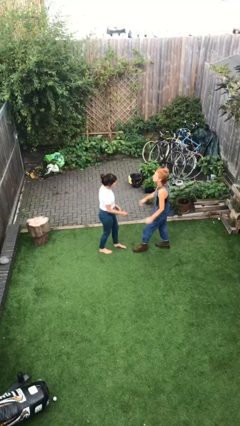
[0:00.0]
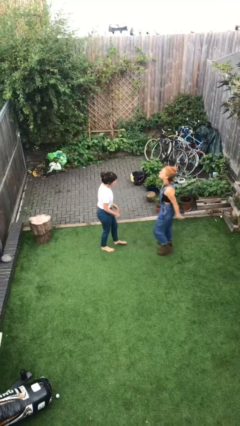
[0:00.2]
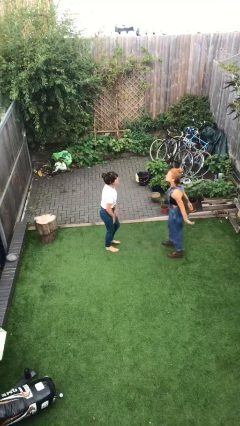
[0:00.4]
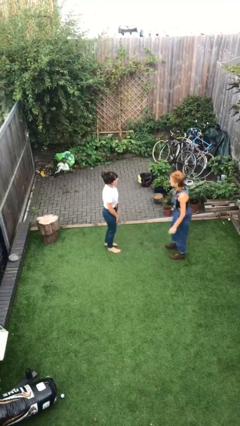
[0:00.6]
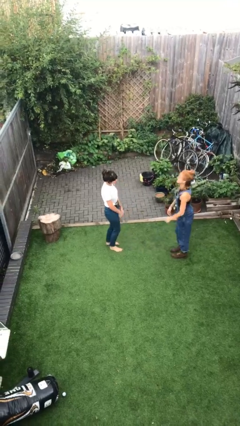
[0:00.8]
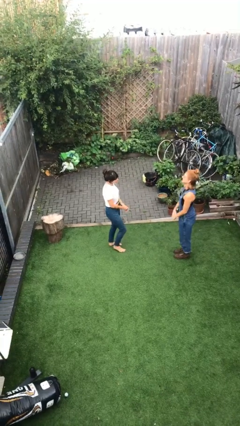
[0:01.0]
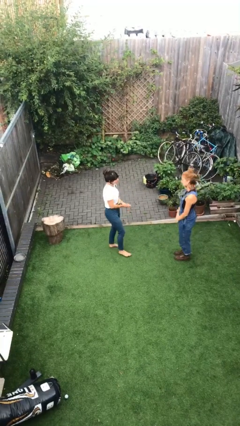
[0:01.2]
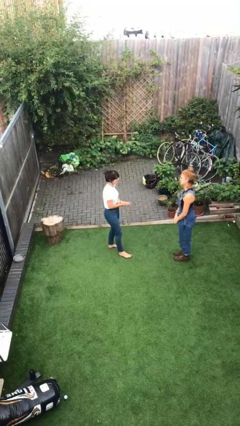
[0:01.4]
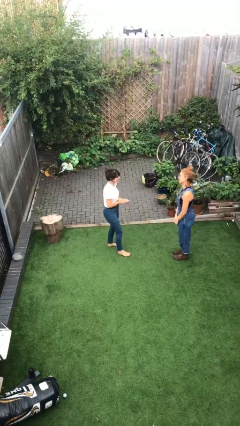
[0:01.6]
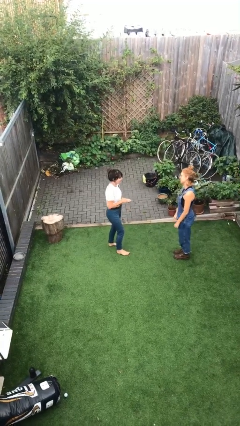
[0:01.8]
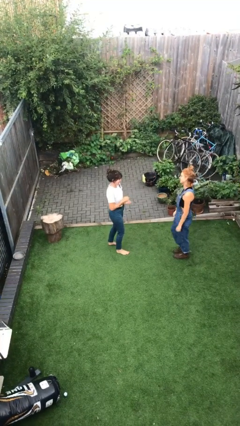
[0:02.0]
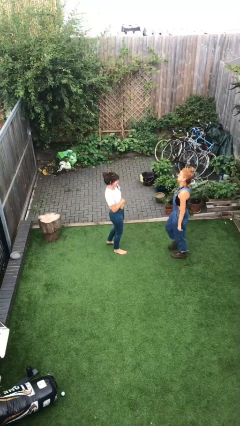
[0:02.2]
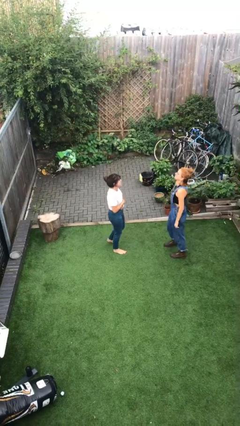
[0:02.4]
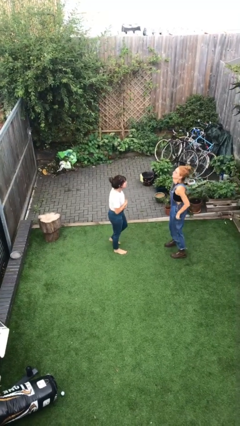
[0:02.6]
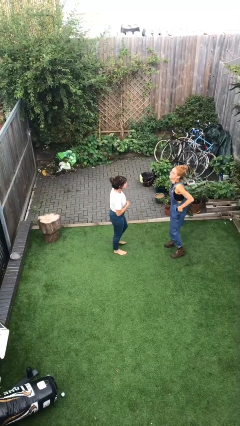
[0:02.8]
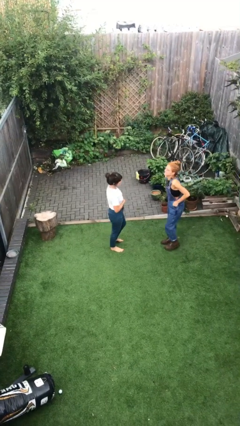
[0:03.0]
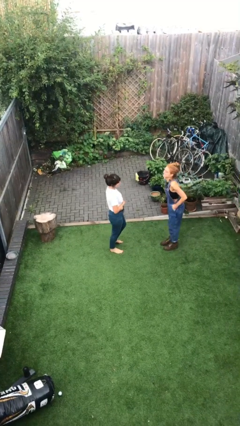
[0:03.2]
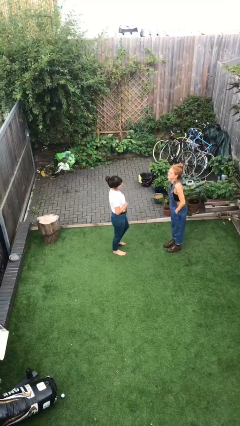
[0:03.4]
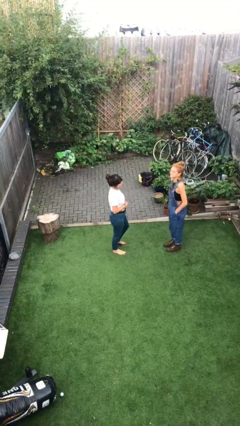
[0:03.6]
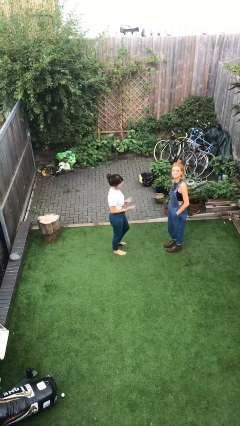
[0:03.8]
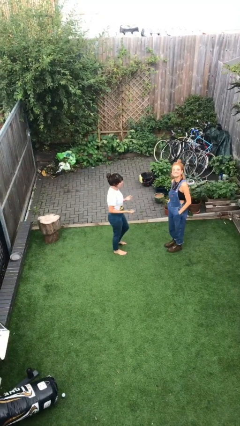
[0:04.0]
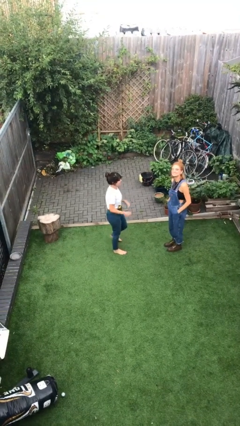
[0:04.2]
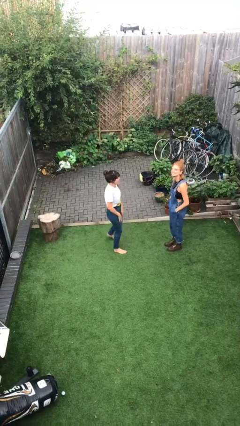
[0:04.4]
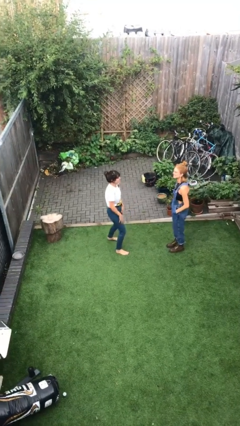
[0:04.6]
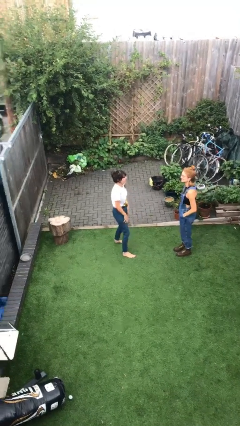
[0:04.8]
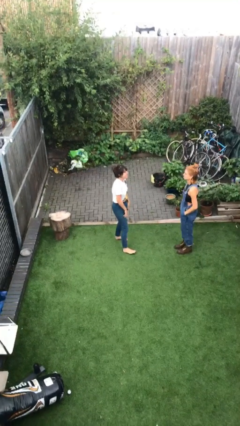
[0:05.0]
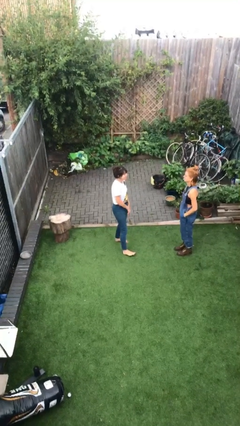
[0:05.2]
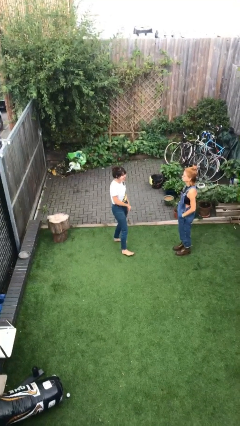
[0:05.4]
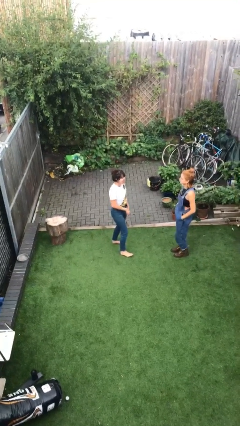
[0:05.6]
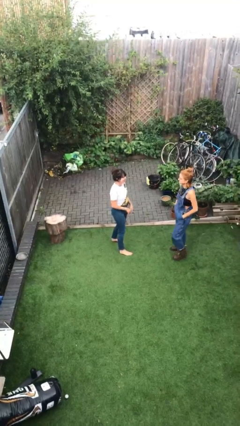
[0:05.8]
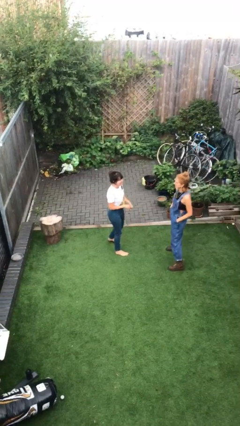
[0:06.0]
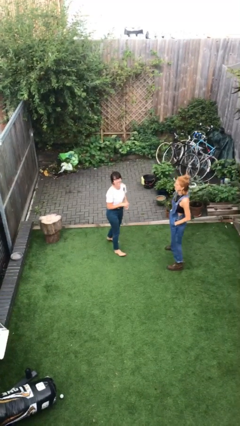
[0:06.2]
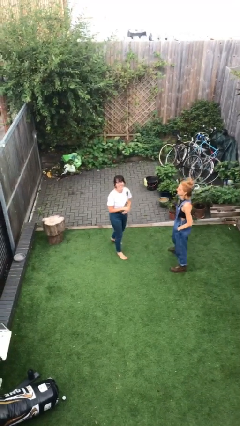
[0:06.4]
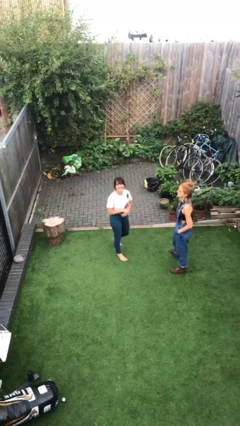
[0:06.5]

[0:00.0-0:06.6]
person talks to person

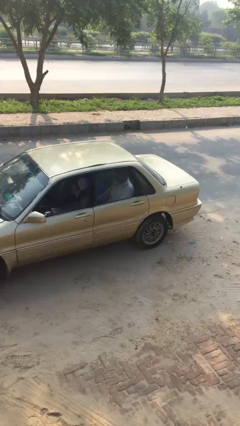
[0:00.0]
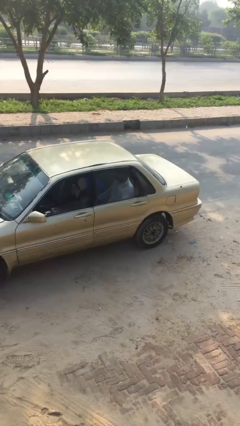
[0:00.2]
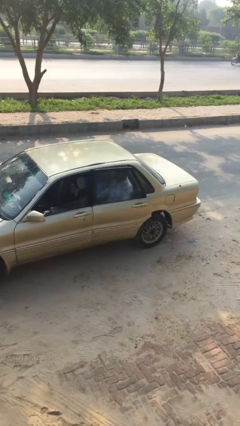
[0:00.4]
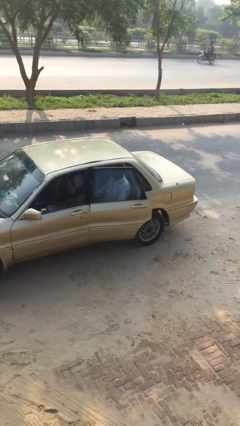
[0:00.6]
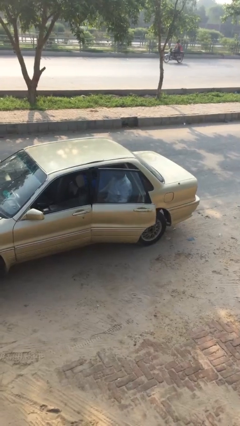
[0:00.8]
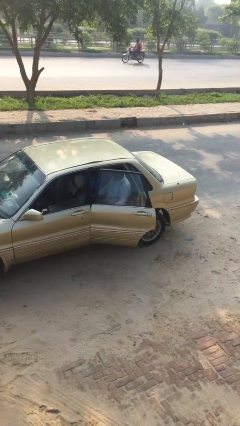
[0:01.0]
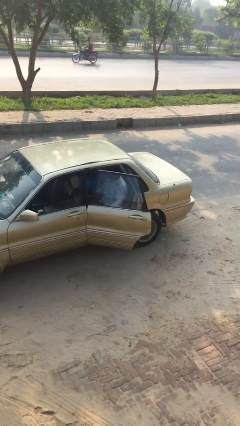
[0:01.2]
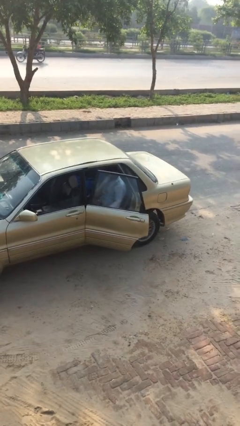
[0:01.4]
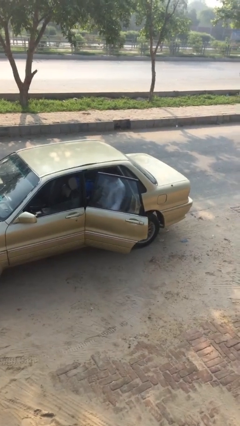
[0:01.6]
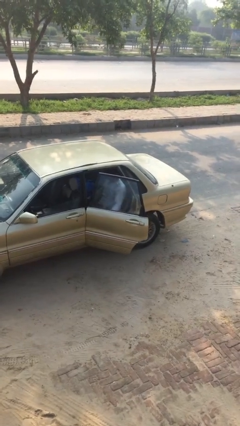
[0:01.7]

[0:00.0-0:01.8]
person opens car door

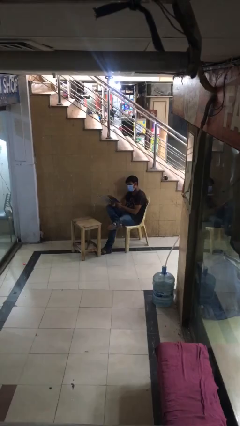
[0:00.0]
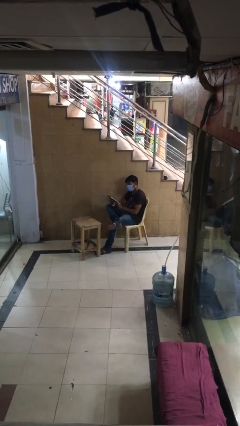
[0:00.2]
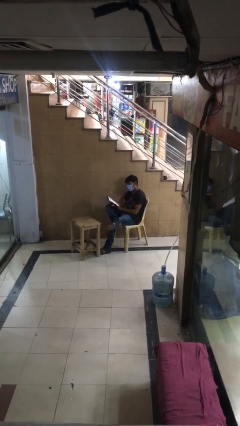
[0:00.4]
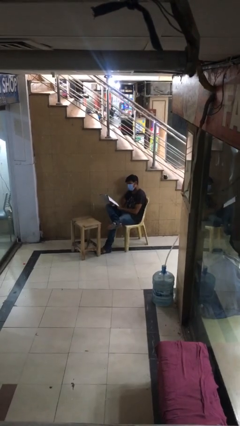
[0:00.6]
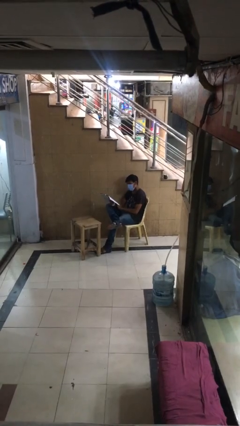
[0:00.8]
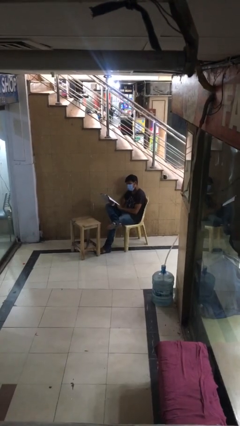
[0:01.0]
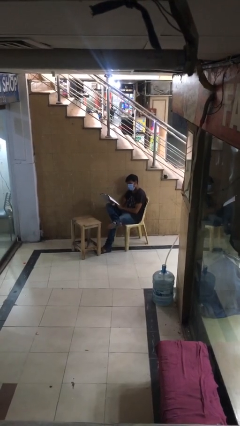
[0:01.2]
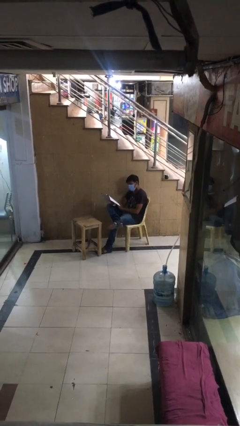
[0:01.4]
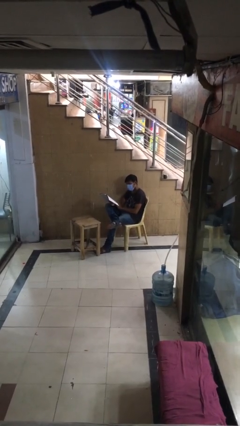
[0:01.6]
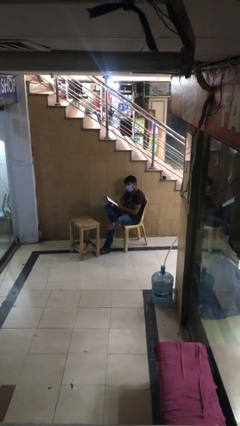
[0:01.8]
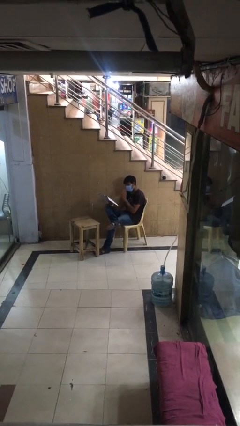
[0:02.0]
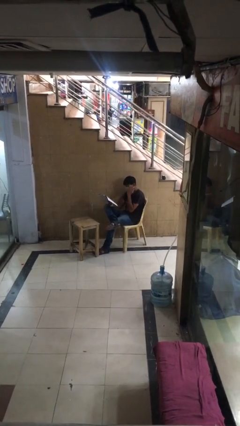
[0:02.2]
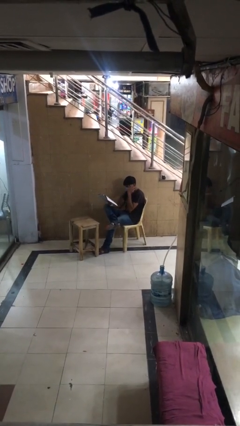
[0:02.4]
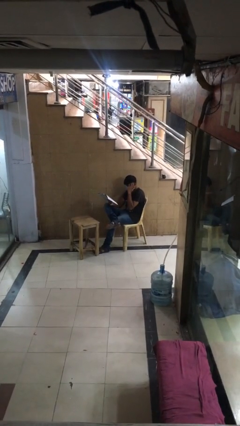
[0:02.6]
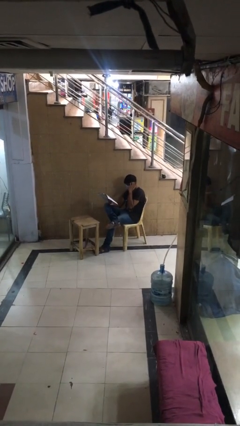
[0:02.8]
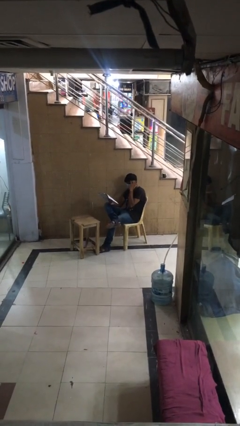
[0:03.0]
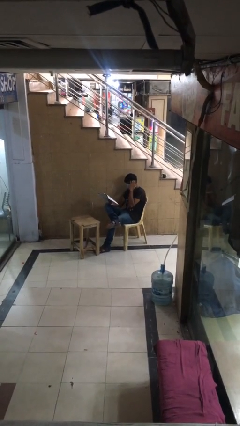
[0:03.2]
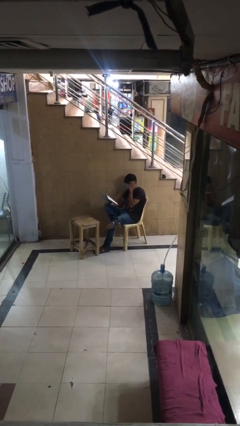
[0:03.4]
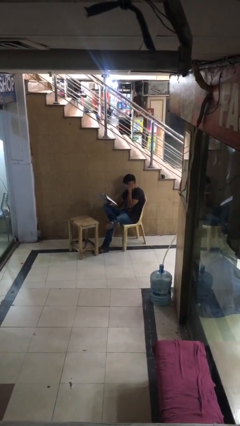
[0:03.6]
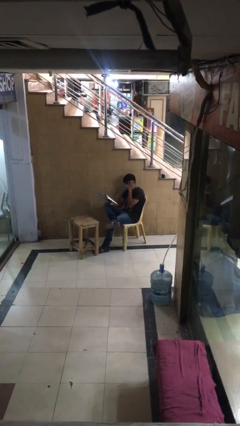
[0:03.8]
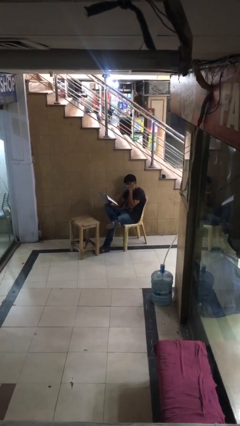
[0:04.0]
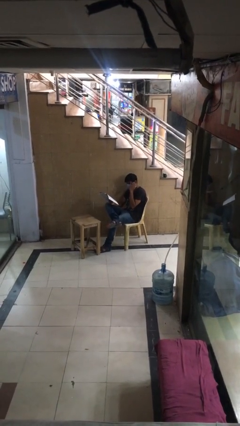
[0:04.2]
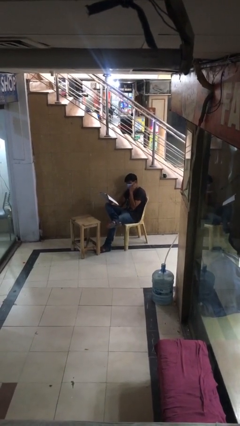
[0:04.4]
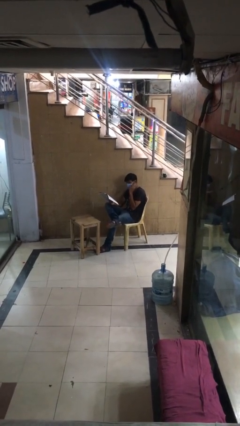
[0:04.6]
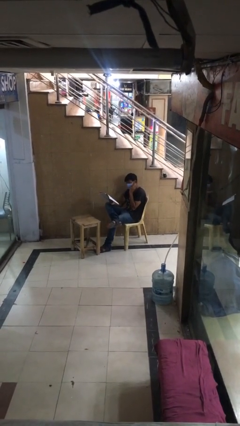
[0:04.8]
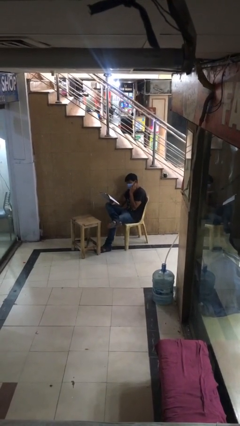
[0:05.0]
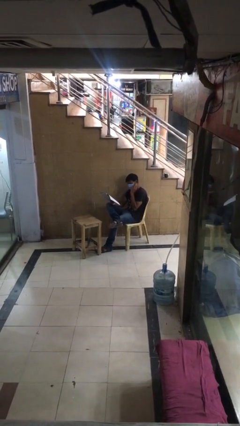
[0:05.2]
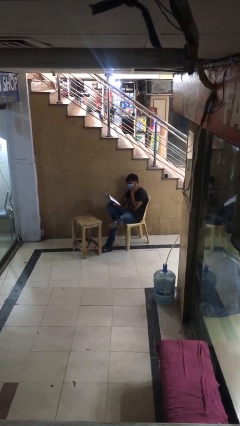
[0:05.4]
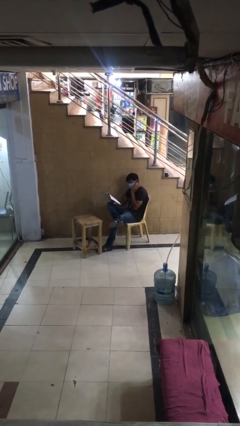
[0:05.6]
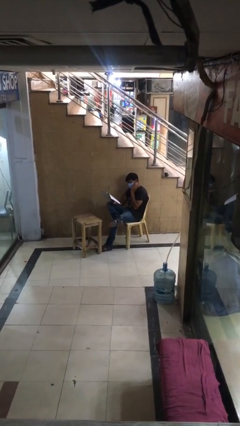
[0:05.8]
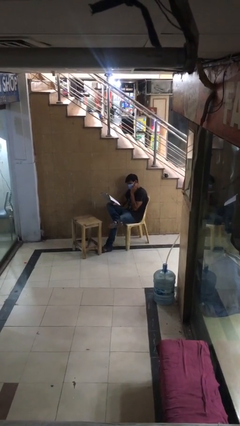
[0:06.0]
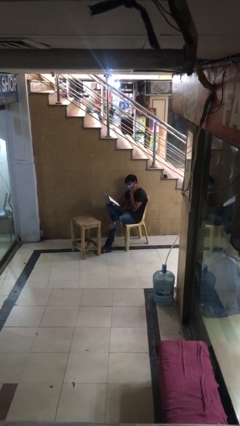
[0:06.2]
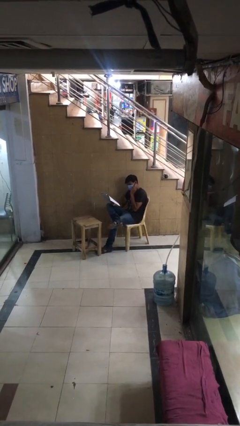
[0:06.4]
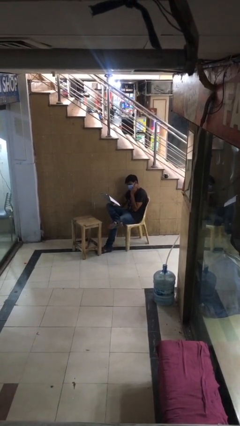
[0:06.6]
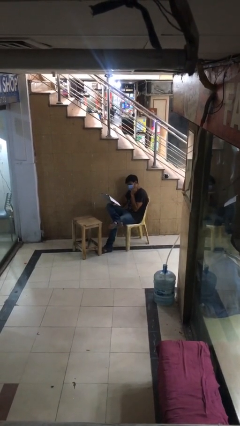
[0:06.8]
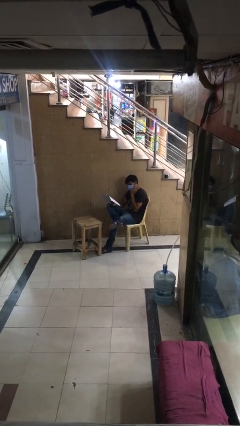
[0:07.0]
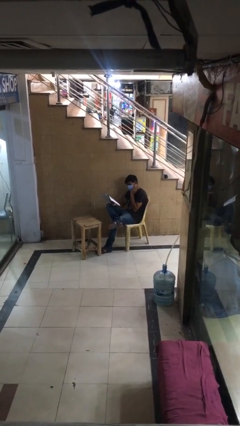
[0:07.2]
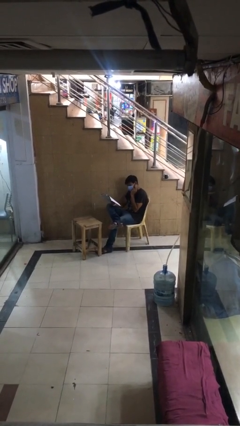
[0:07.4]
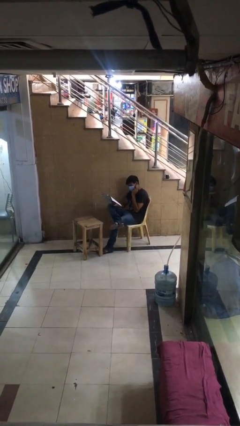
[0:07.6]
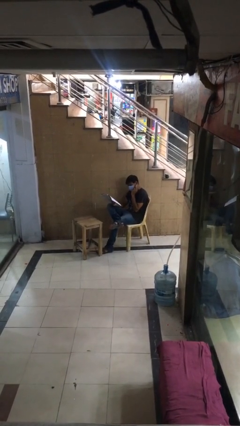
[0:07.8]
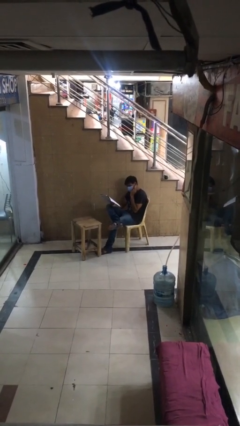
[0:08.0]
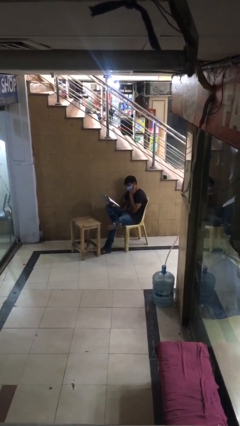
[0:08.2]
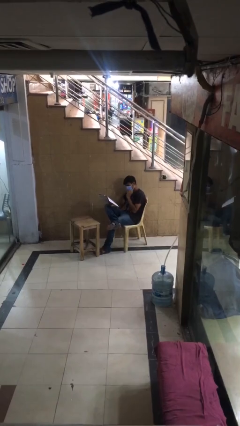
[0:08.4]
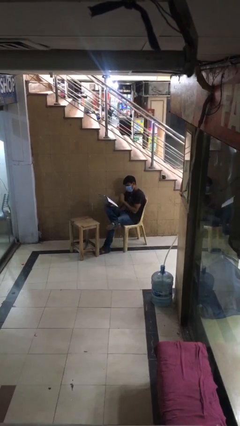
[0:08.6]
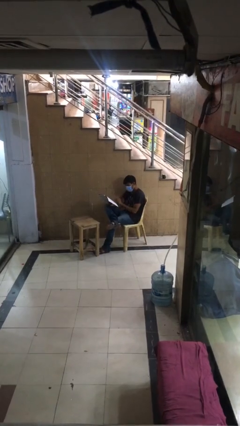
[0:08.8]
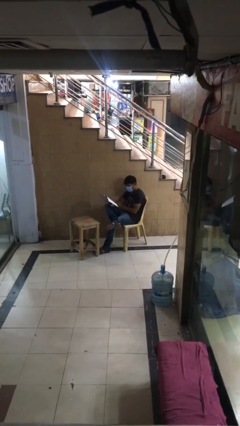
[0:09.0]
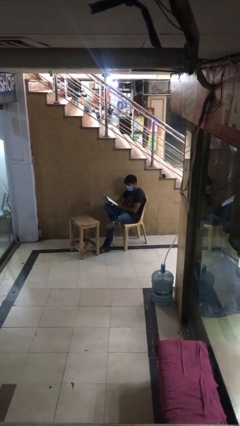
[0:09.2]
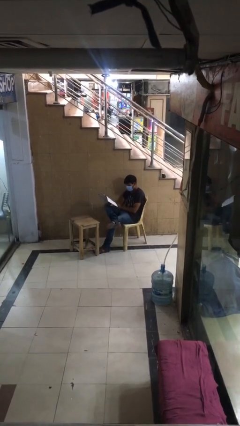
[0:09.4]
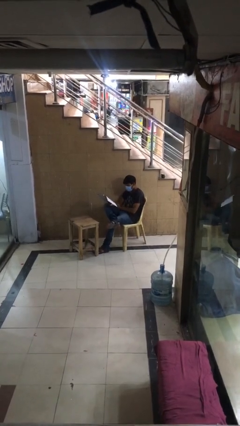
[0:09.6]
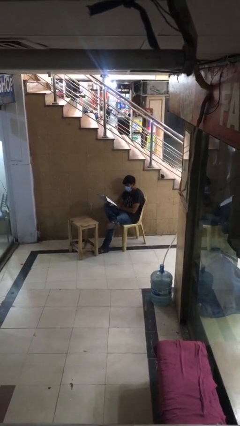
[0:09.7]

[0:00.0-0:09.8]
person reads document
